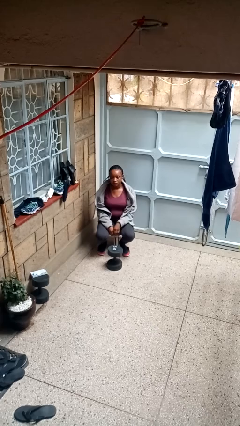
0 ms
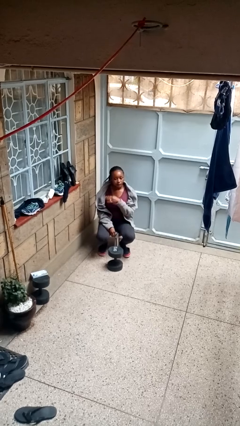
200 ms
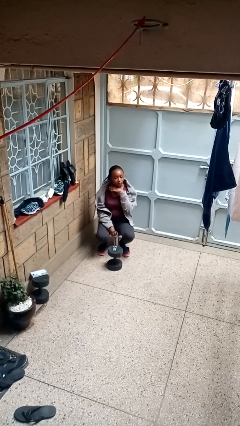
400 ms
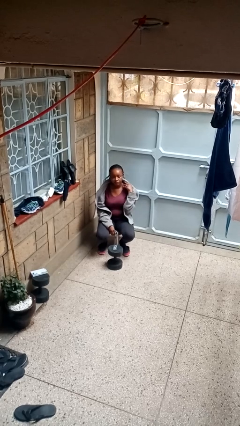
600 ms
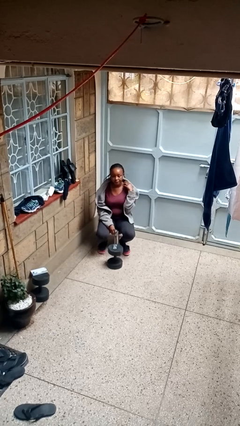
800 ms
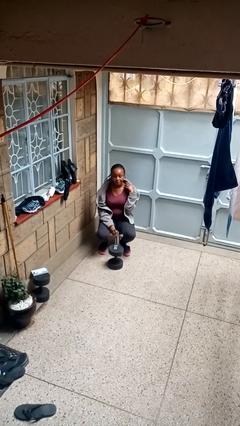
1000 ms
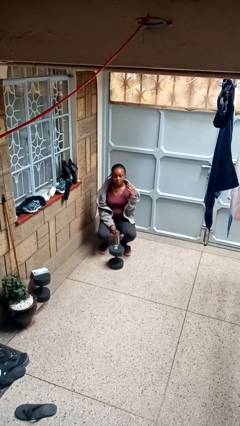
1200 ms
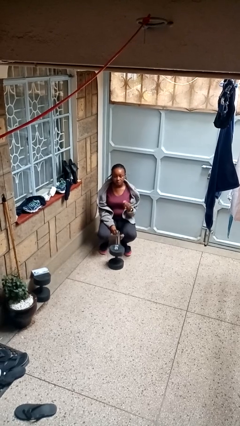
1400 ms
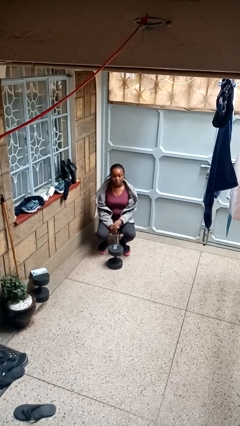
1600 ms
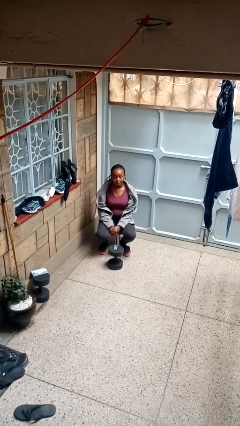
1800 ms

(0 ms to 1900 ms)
person gestures cut

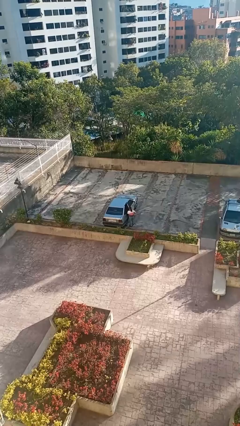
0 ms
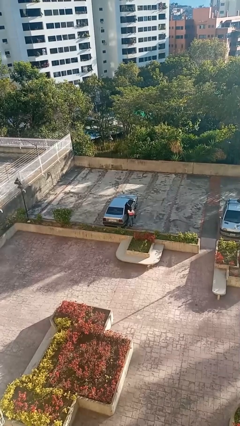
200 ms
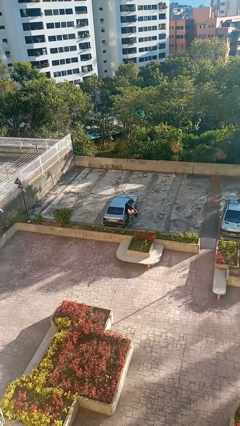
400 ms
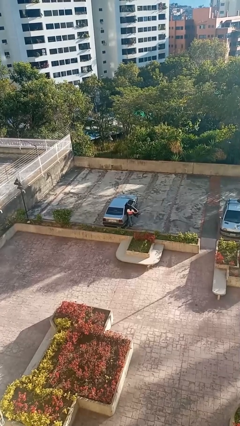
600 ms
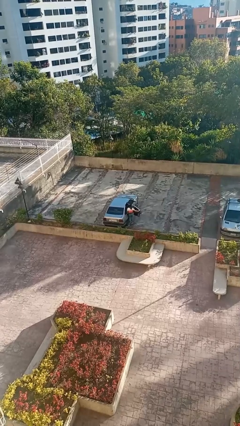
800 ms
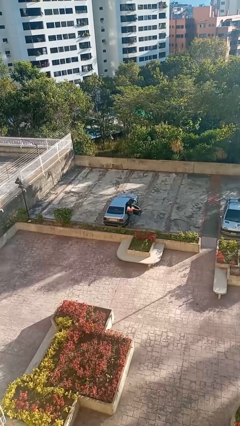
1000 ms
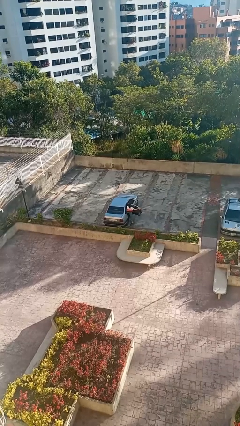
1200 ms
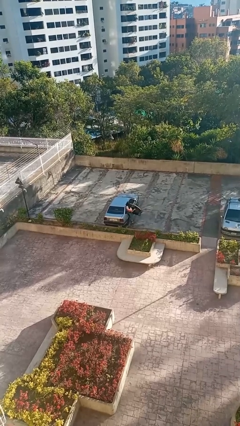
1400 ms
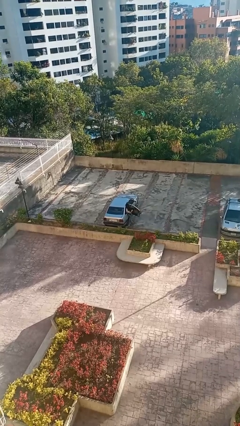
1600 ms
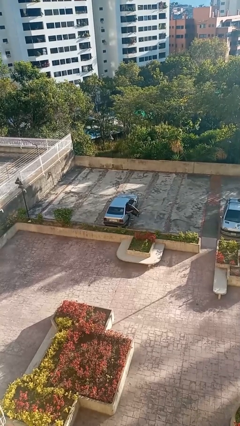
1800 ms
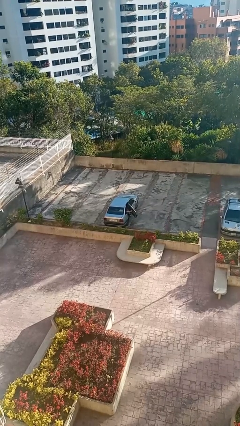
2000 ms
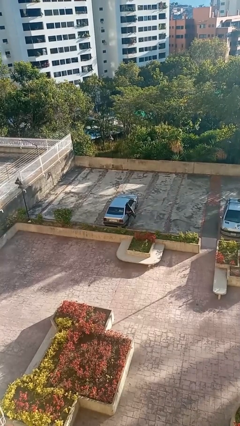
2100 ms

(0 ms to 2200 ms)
car picks up person

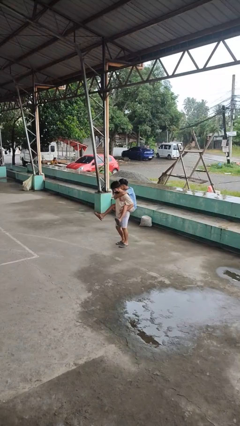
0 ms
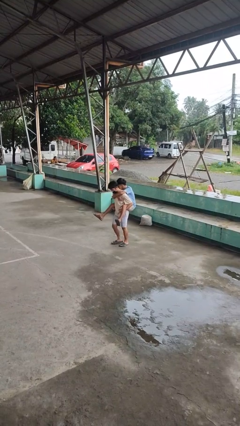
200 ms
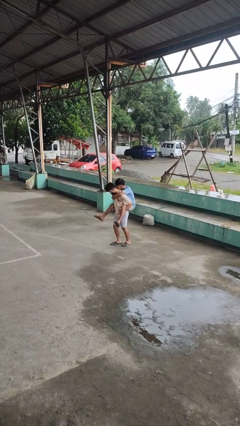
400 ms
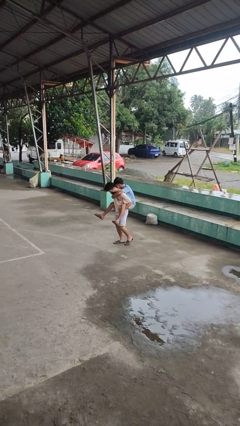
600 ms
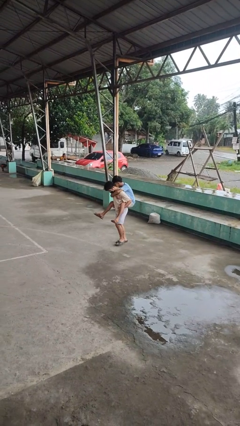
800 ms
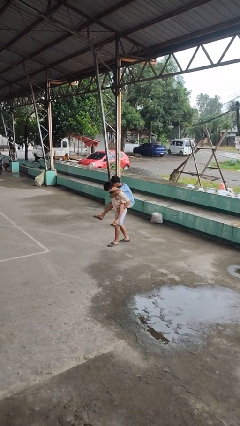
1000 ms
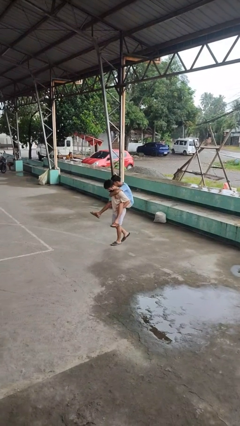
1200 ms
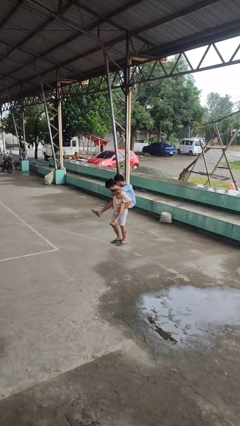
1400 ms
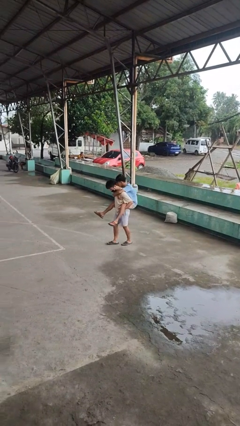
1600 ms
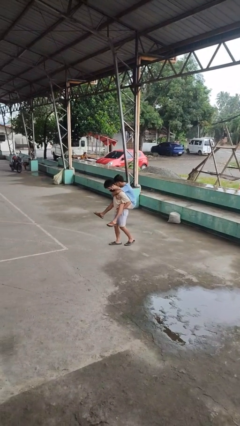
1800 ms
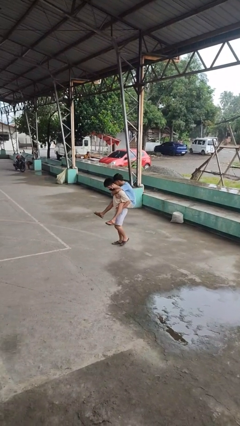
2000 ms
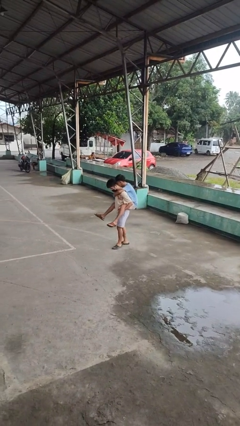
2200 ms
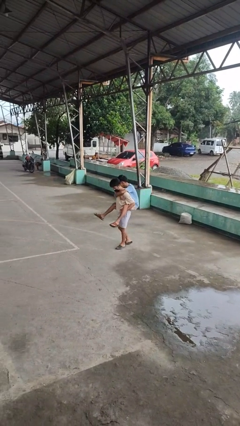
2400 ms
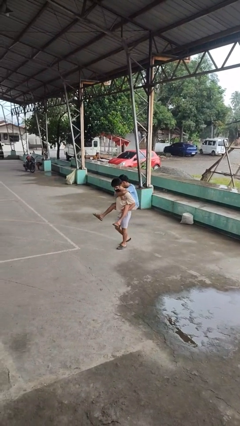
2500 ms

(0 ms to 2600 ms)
person carries person on back

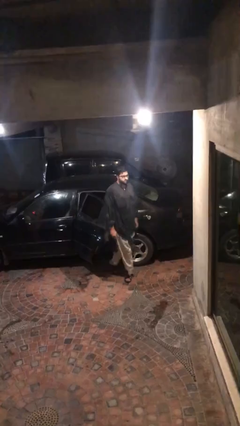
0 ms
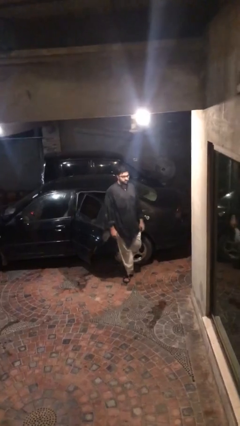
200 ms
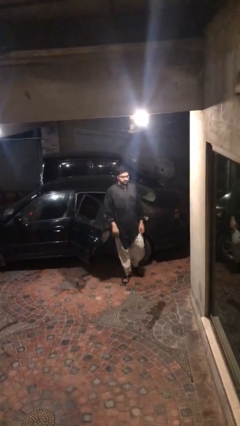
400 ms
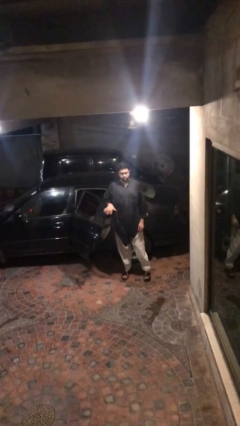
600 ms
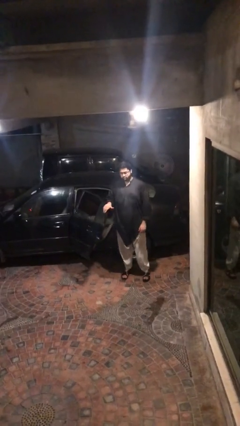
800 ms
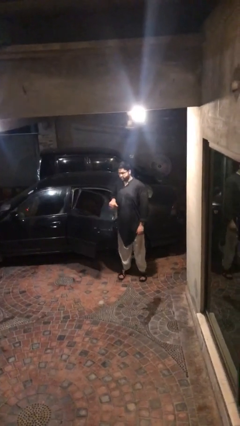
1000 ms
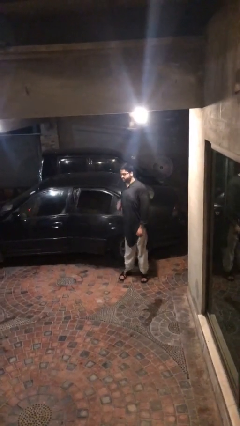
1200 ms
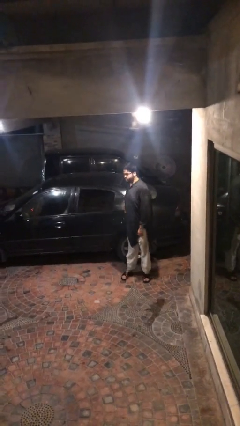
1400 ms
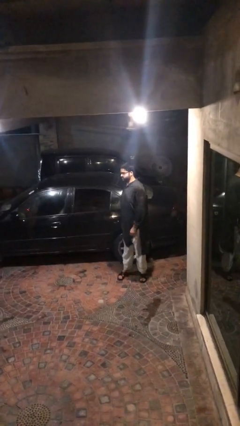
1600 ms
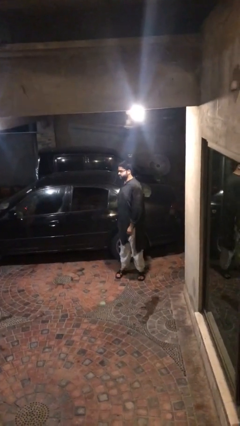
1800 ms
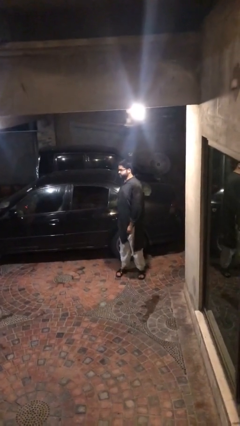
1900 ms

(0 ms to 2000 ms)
person closes car door

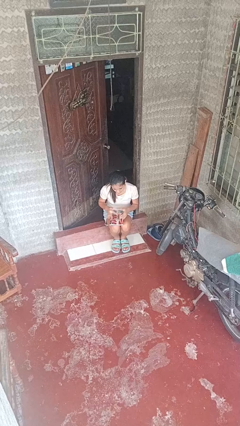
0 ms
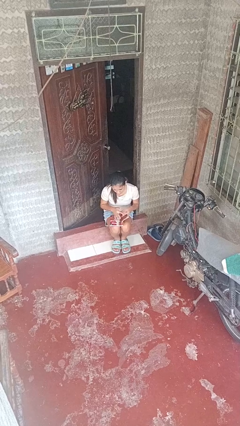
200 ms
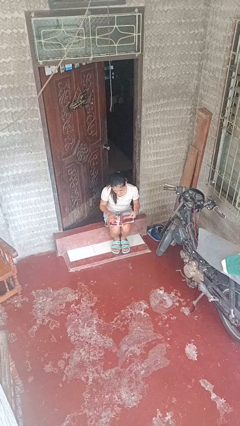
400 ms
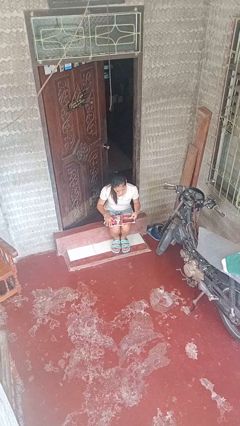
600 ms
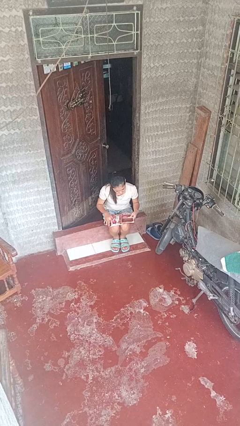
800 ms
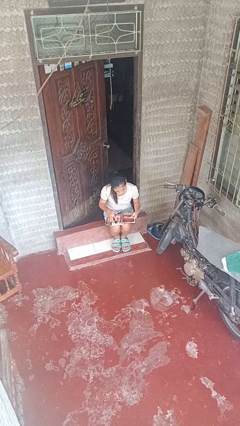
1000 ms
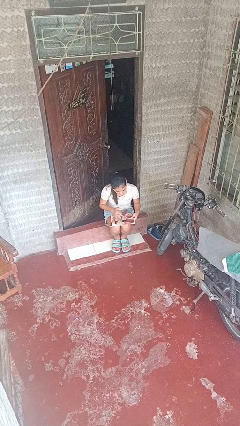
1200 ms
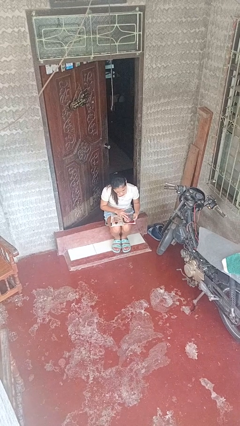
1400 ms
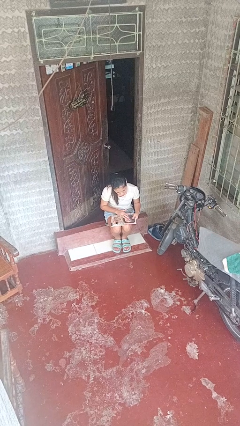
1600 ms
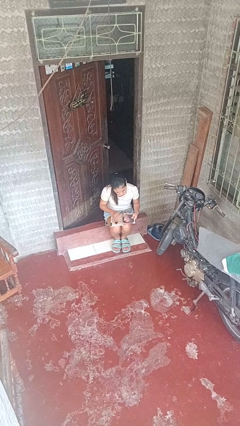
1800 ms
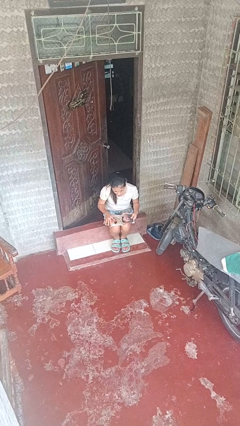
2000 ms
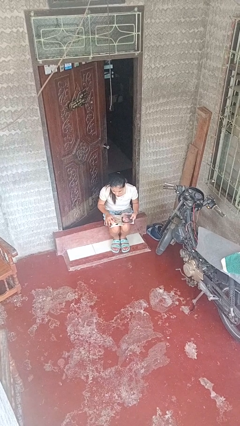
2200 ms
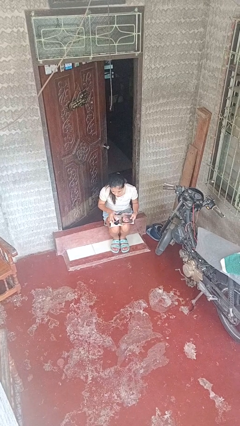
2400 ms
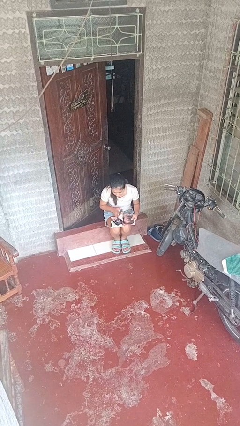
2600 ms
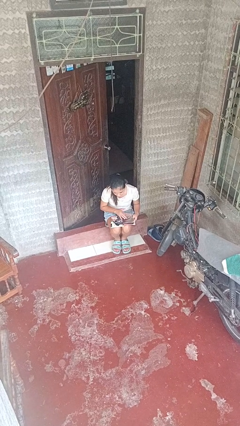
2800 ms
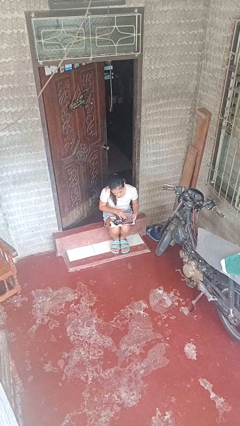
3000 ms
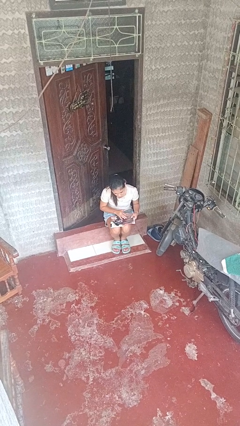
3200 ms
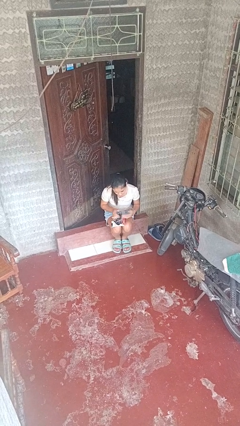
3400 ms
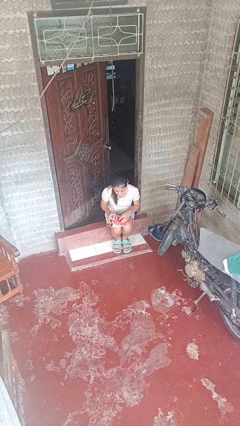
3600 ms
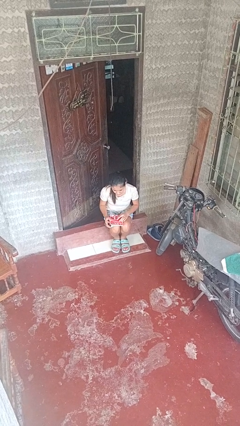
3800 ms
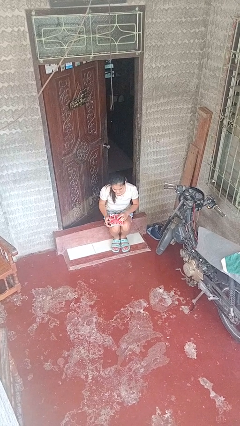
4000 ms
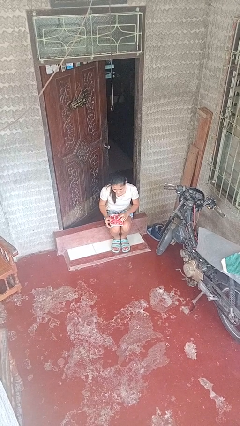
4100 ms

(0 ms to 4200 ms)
person reads magazine

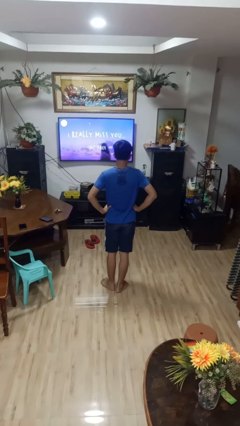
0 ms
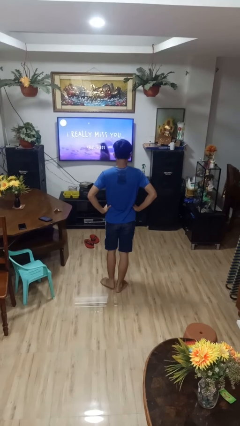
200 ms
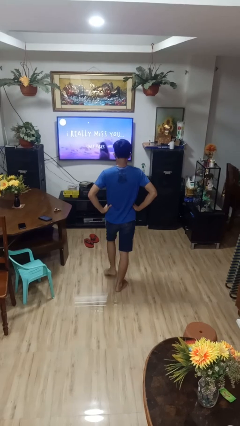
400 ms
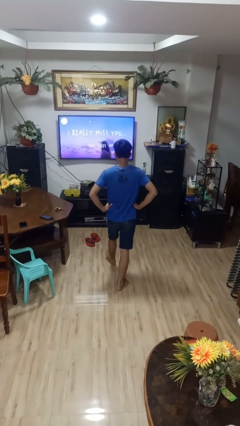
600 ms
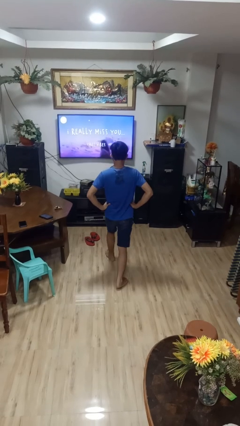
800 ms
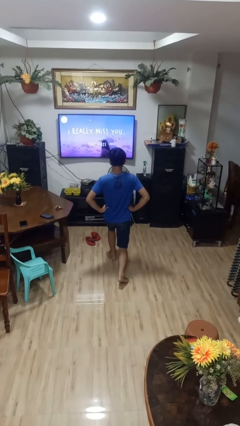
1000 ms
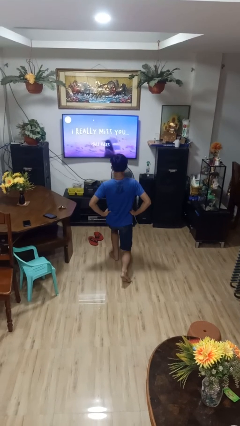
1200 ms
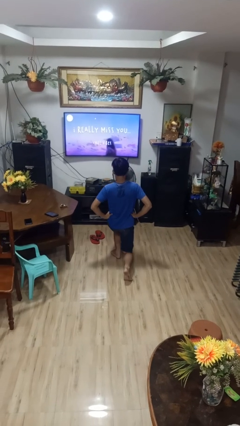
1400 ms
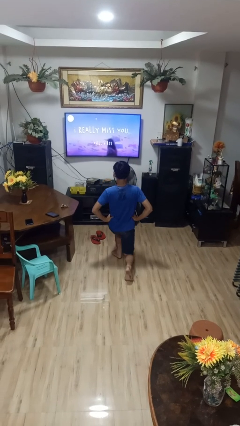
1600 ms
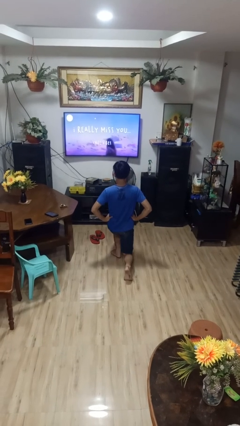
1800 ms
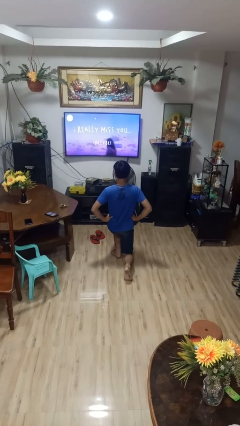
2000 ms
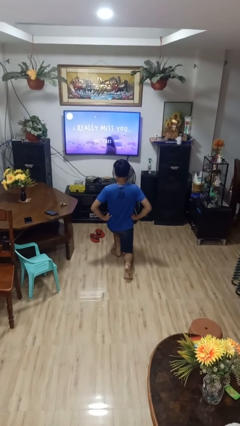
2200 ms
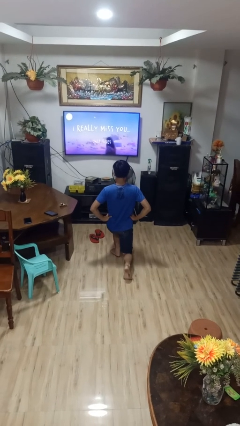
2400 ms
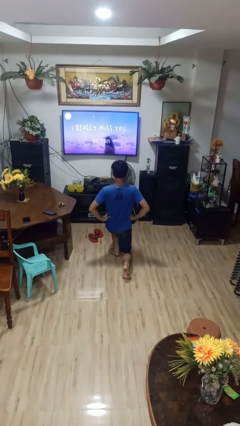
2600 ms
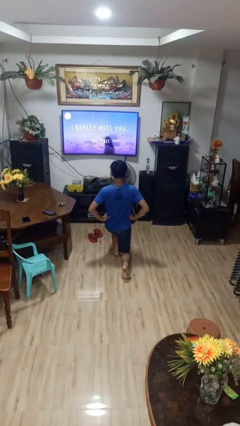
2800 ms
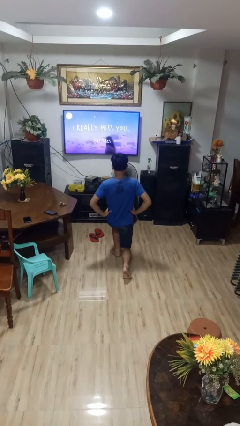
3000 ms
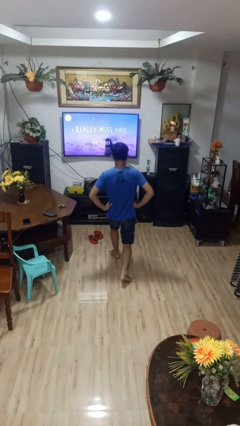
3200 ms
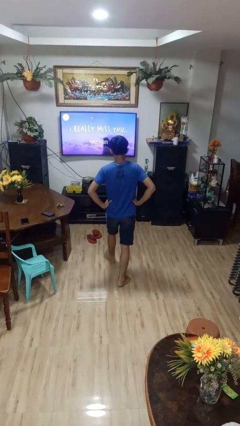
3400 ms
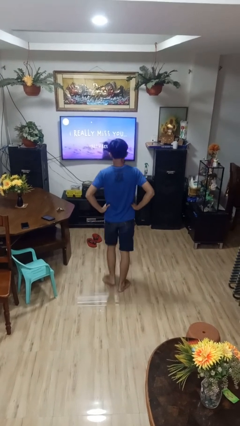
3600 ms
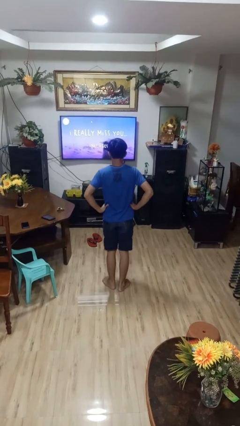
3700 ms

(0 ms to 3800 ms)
person exercises with lunges

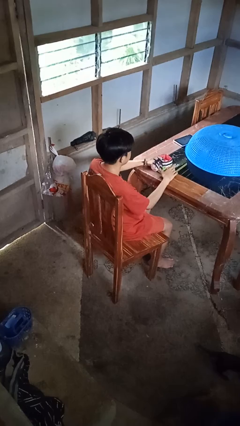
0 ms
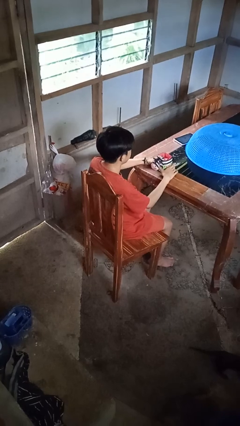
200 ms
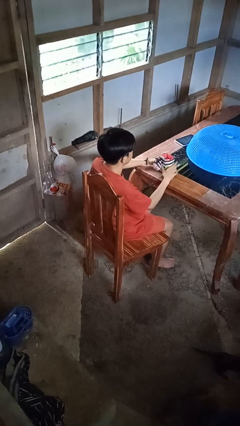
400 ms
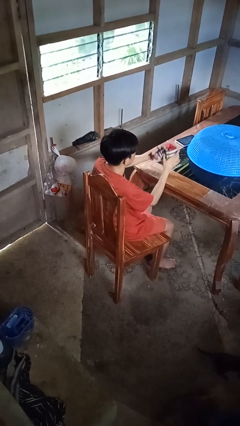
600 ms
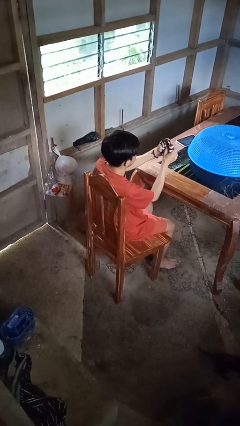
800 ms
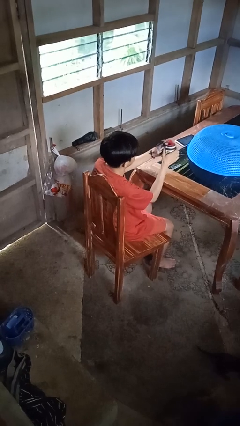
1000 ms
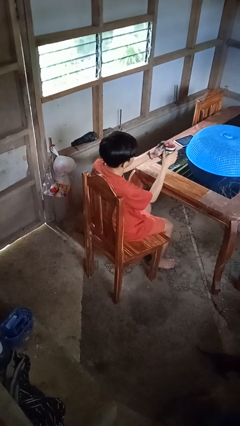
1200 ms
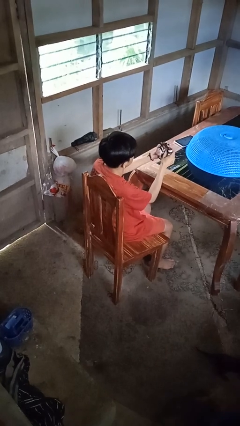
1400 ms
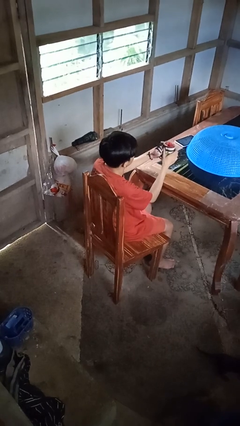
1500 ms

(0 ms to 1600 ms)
person squeezes object
